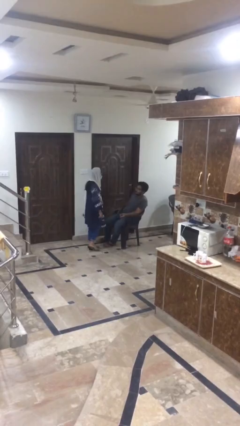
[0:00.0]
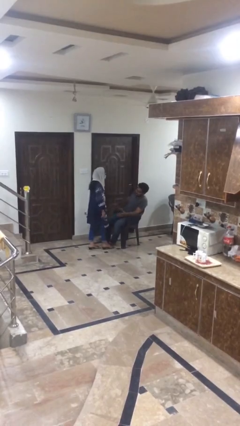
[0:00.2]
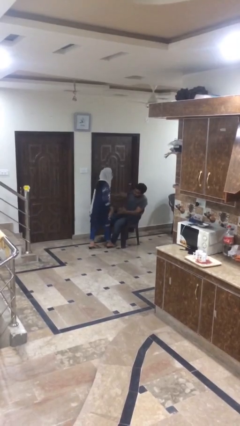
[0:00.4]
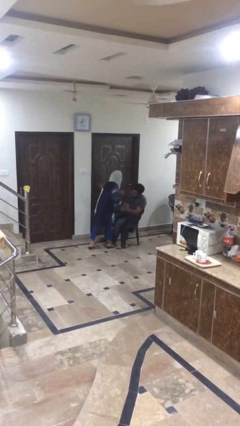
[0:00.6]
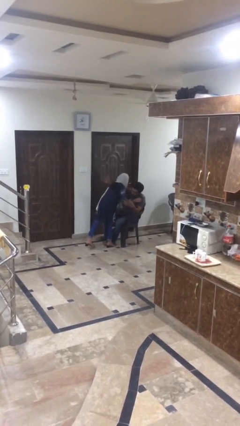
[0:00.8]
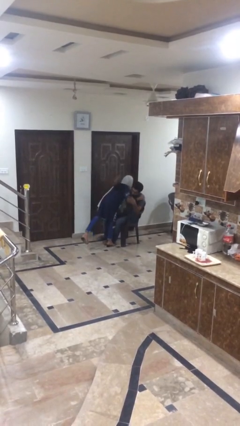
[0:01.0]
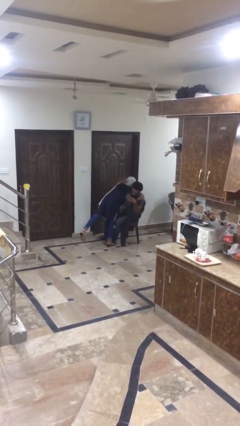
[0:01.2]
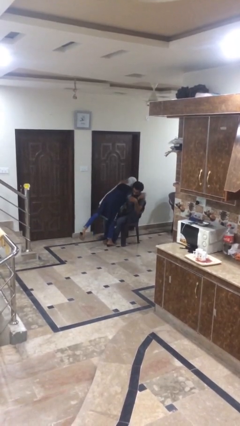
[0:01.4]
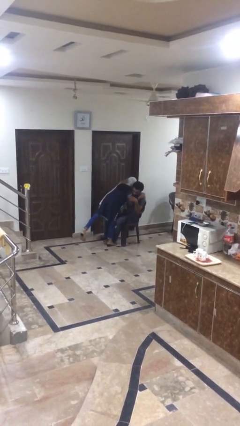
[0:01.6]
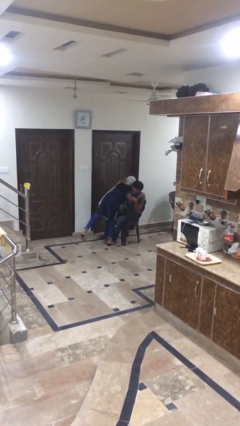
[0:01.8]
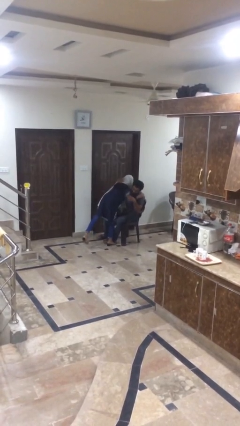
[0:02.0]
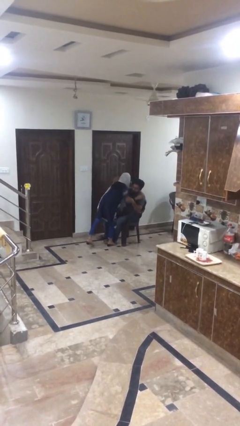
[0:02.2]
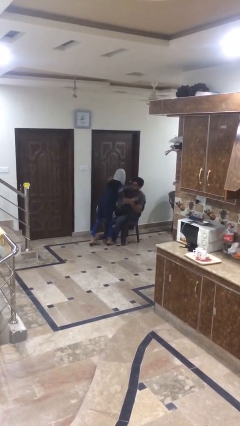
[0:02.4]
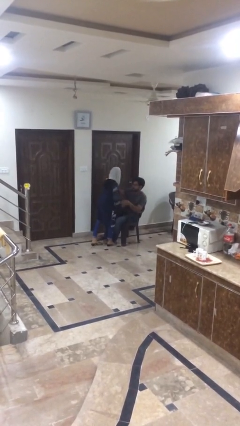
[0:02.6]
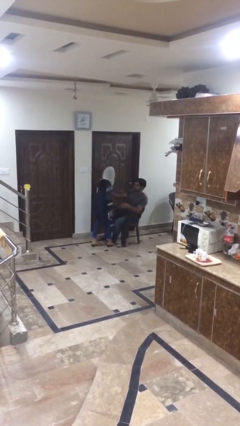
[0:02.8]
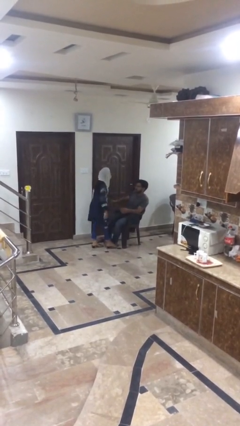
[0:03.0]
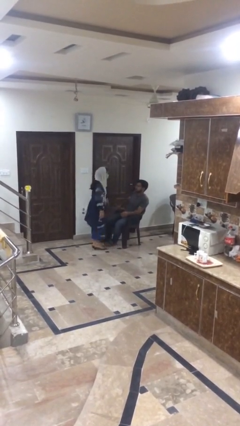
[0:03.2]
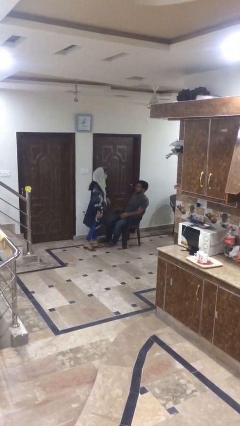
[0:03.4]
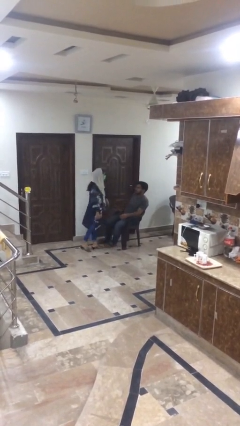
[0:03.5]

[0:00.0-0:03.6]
person embraces person

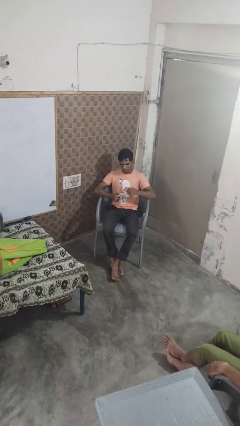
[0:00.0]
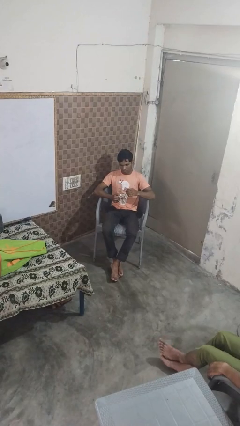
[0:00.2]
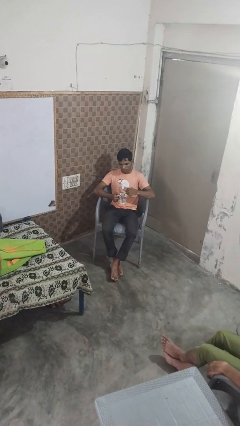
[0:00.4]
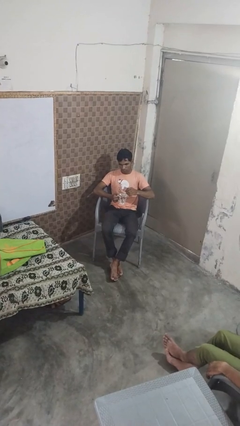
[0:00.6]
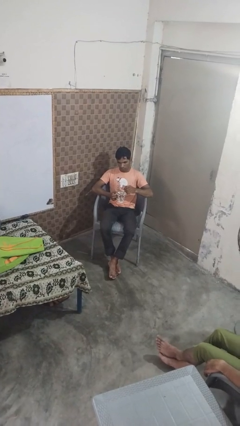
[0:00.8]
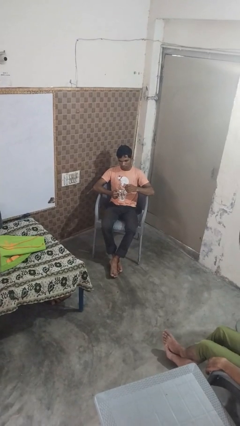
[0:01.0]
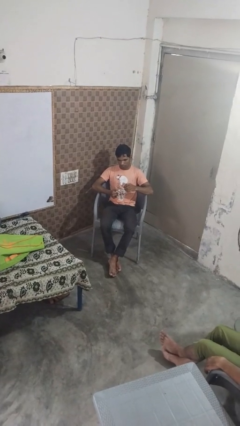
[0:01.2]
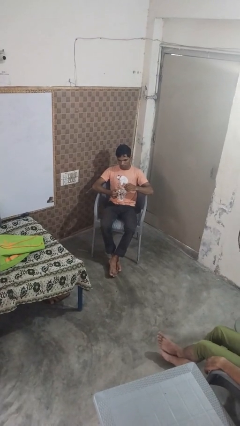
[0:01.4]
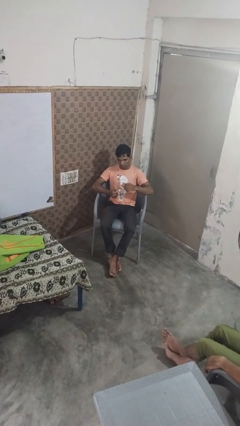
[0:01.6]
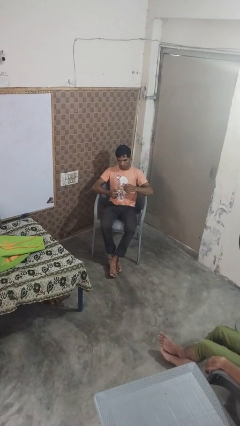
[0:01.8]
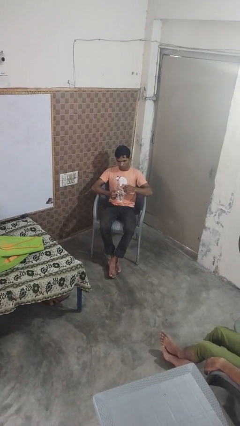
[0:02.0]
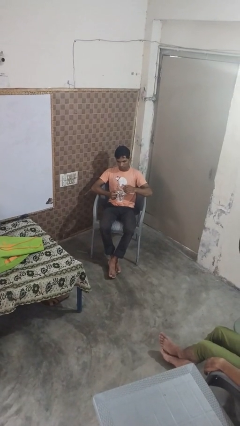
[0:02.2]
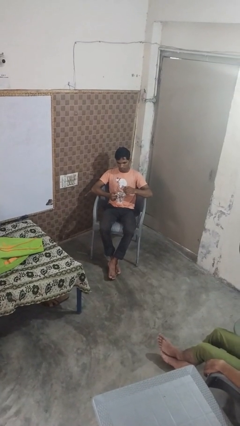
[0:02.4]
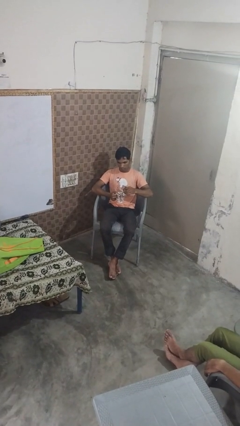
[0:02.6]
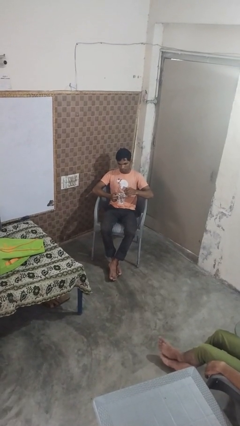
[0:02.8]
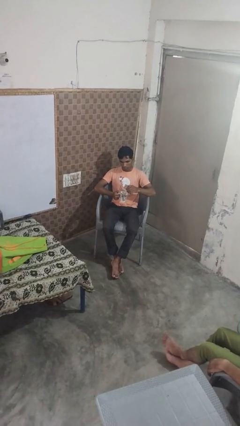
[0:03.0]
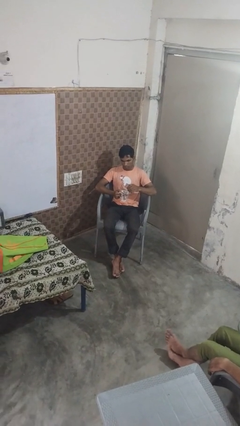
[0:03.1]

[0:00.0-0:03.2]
person stirs mug

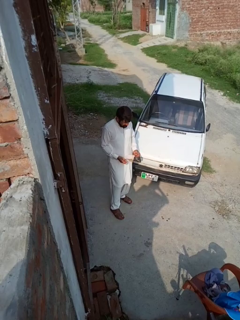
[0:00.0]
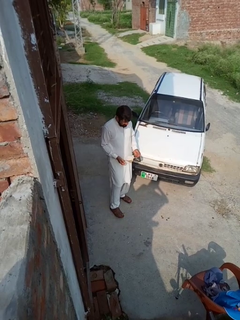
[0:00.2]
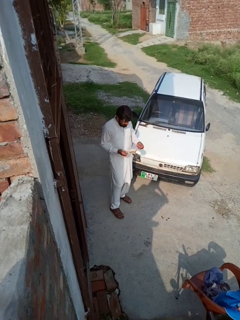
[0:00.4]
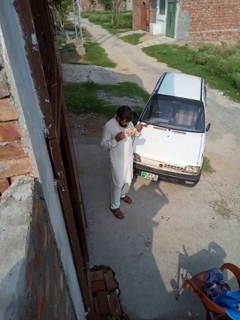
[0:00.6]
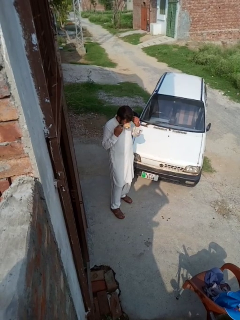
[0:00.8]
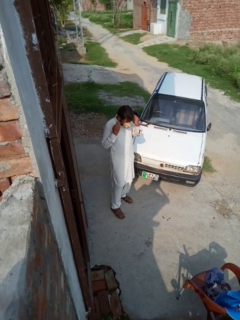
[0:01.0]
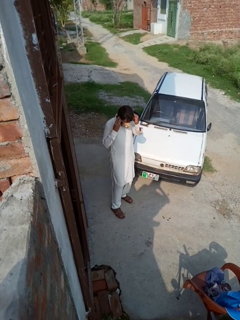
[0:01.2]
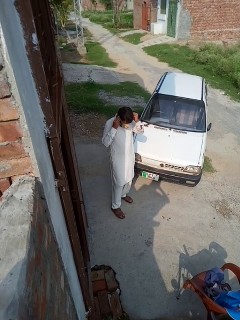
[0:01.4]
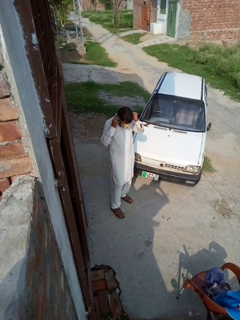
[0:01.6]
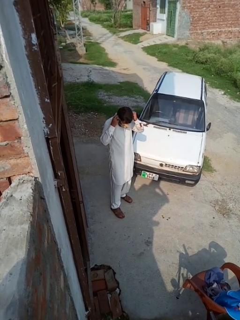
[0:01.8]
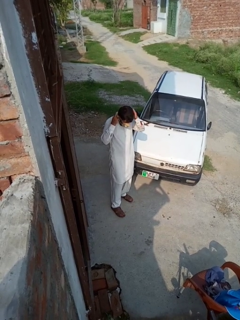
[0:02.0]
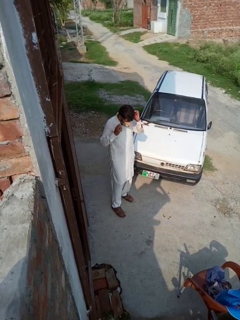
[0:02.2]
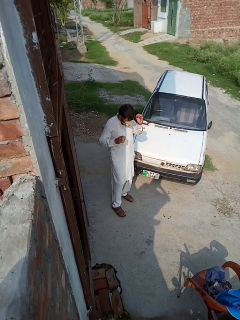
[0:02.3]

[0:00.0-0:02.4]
person puts on facemask

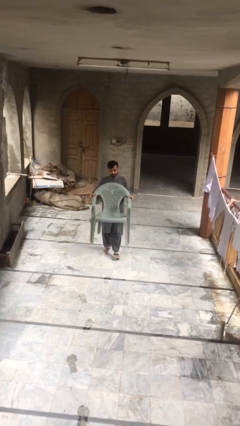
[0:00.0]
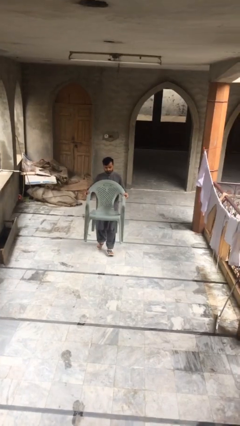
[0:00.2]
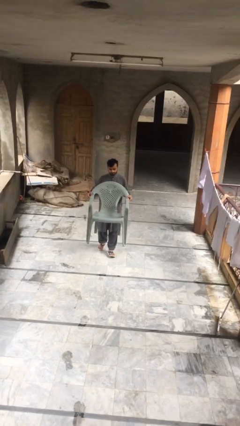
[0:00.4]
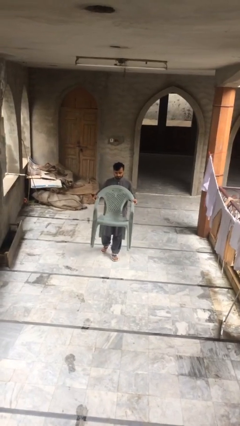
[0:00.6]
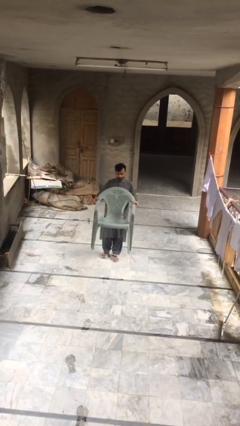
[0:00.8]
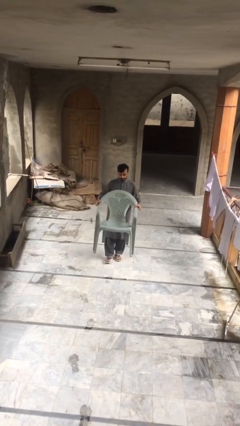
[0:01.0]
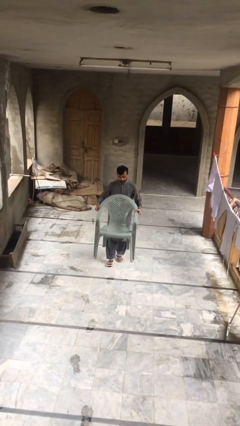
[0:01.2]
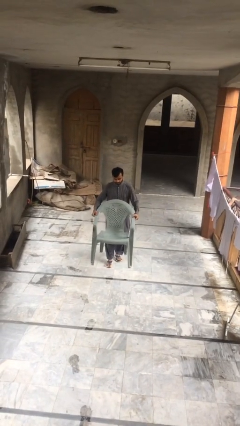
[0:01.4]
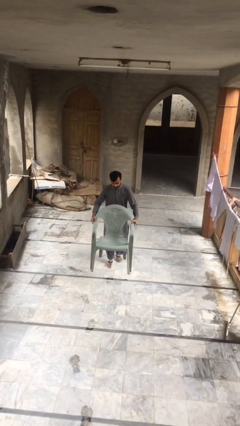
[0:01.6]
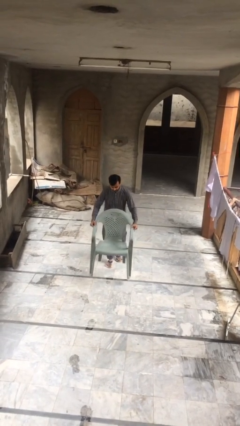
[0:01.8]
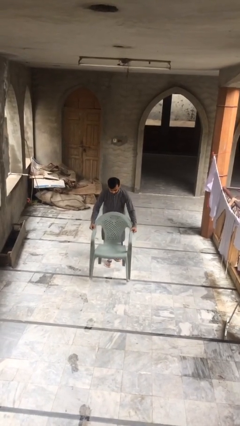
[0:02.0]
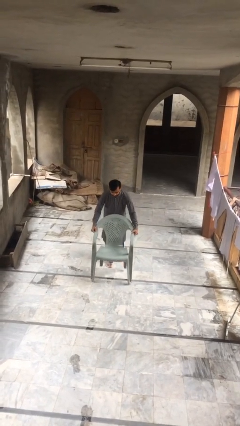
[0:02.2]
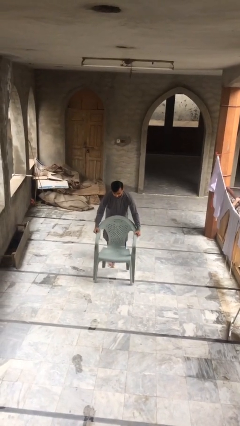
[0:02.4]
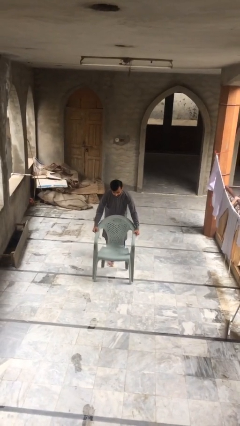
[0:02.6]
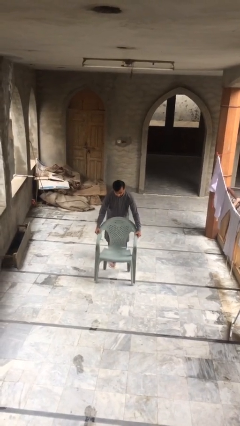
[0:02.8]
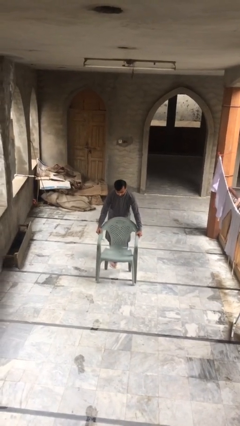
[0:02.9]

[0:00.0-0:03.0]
person puts down object on floor

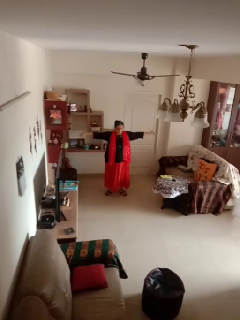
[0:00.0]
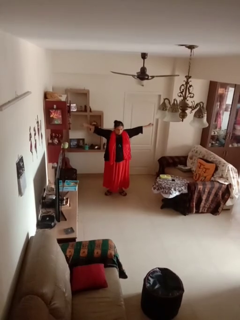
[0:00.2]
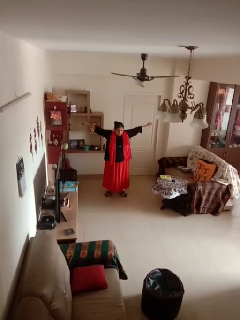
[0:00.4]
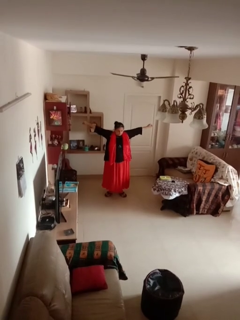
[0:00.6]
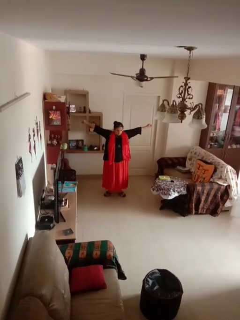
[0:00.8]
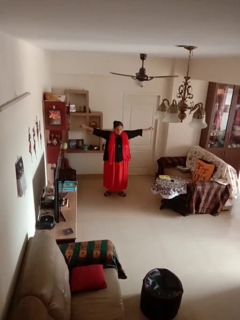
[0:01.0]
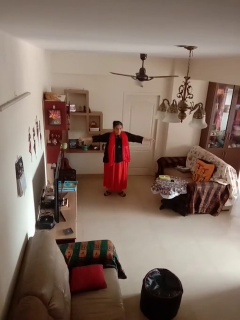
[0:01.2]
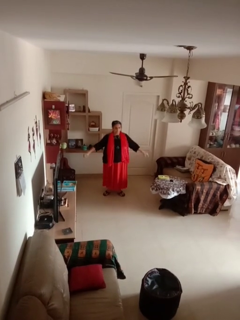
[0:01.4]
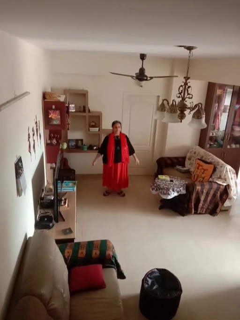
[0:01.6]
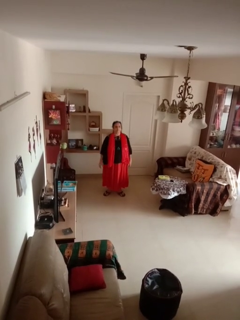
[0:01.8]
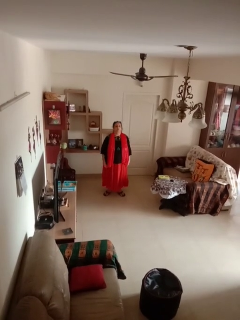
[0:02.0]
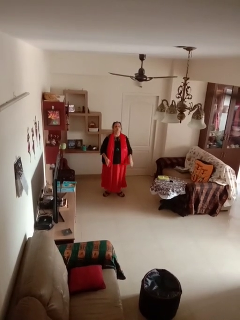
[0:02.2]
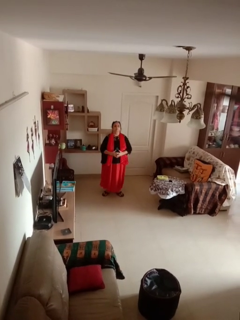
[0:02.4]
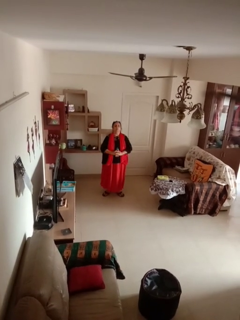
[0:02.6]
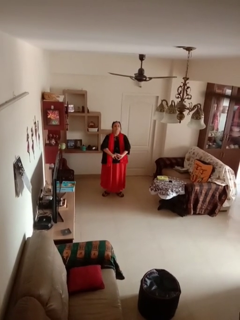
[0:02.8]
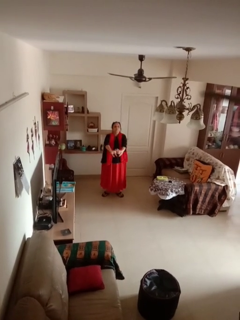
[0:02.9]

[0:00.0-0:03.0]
person stretches arms to side

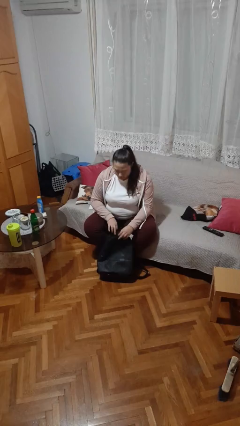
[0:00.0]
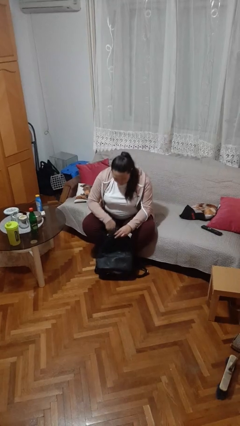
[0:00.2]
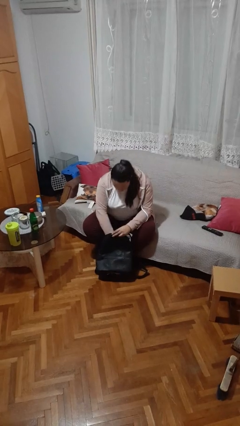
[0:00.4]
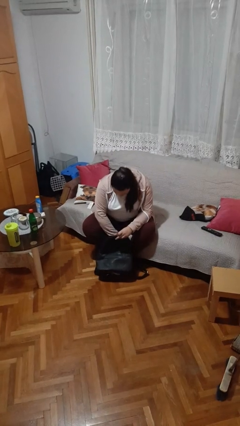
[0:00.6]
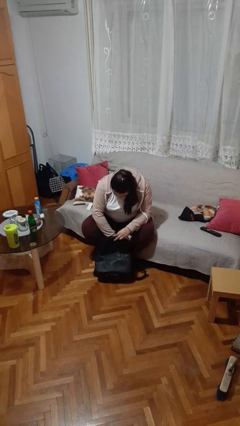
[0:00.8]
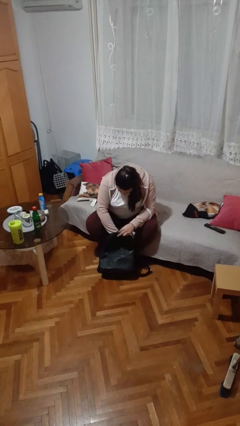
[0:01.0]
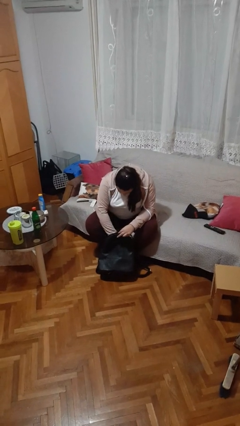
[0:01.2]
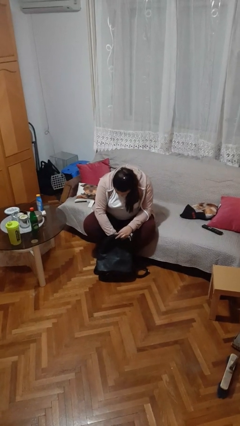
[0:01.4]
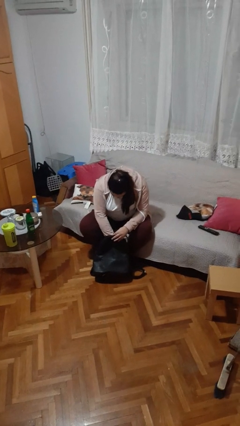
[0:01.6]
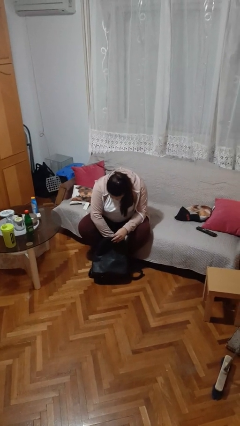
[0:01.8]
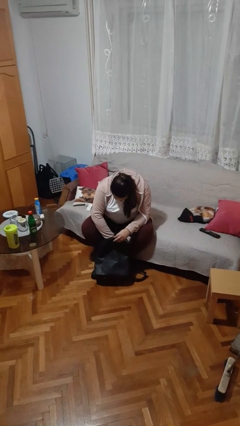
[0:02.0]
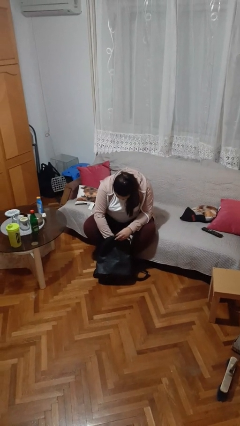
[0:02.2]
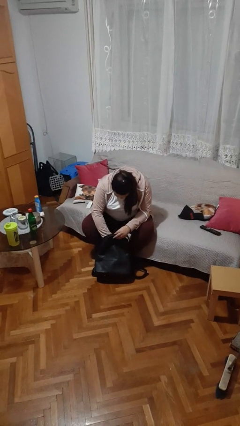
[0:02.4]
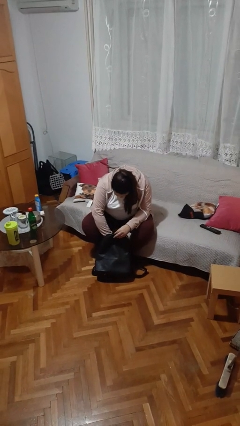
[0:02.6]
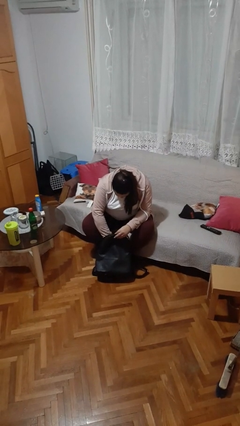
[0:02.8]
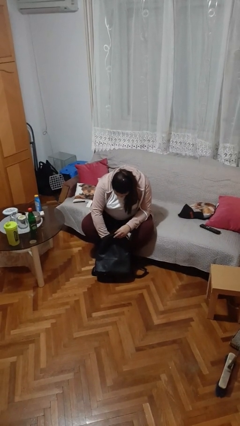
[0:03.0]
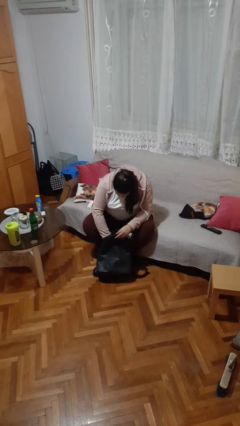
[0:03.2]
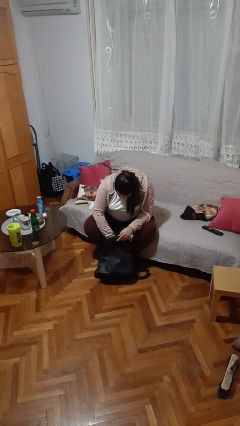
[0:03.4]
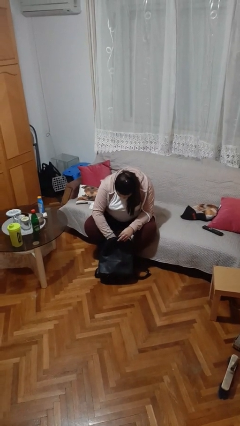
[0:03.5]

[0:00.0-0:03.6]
person searches in backpack
